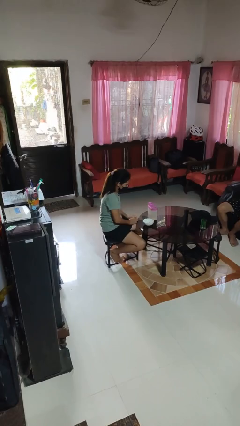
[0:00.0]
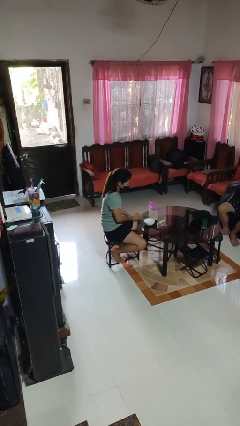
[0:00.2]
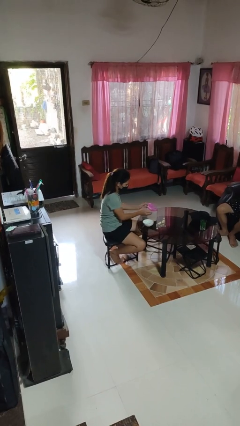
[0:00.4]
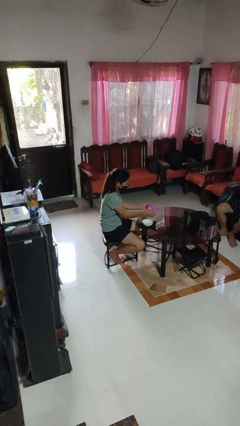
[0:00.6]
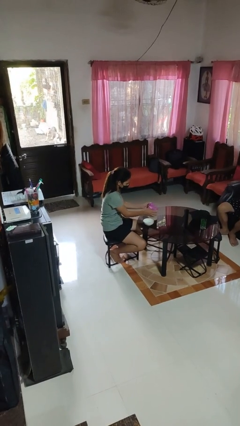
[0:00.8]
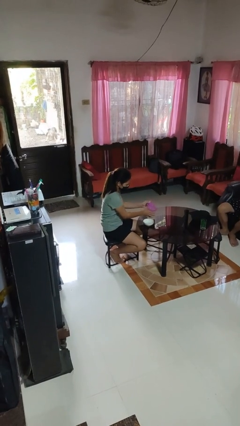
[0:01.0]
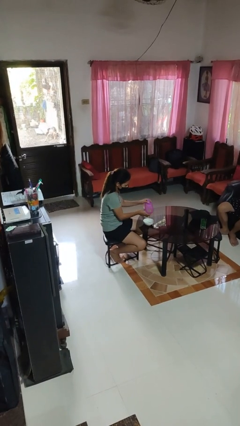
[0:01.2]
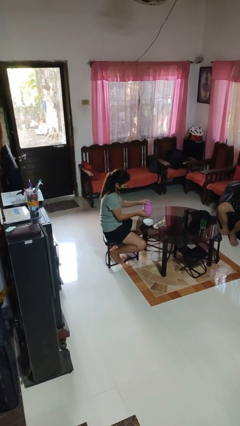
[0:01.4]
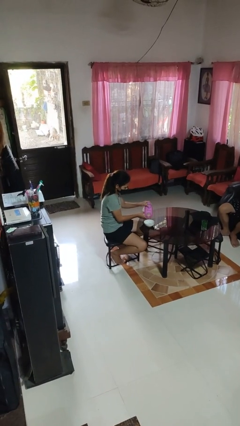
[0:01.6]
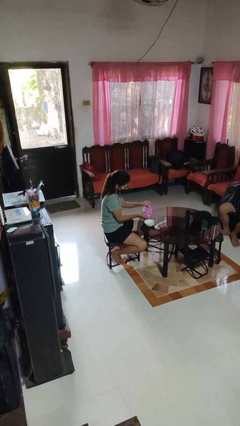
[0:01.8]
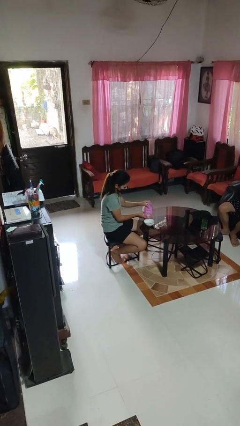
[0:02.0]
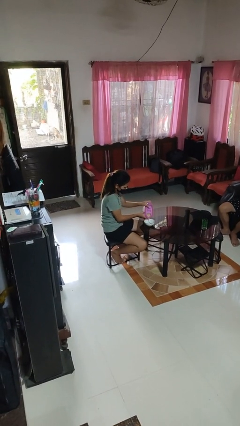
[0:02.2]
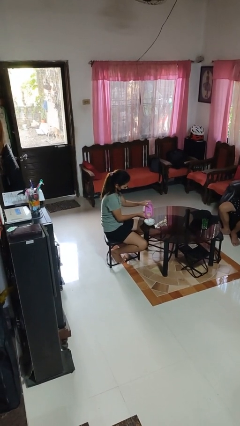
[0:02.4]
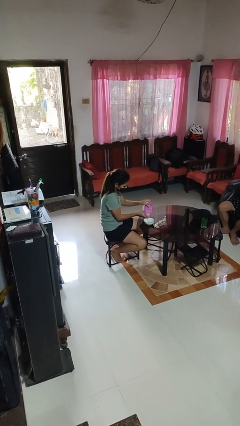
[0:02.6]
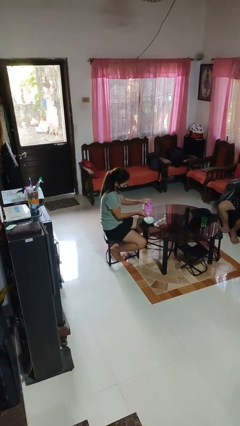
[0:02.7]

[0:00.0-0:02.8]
person pours into bowl

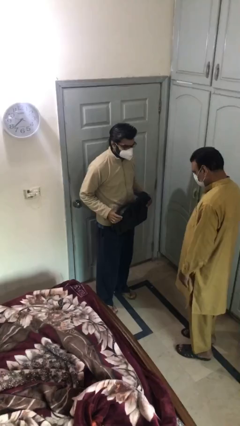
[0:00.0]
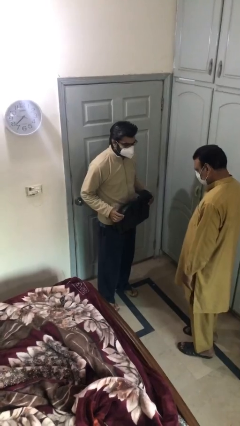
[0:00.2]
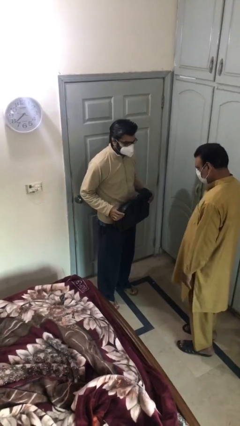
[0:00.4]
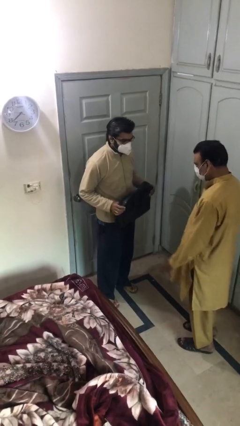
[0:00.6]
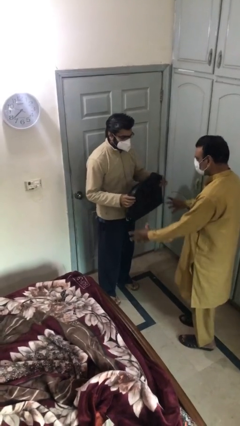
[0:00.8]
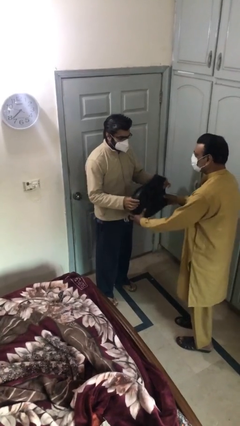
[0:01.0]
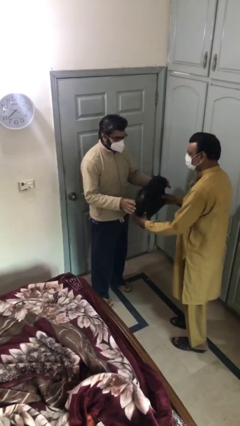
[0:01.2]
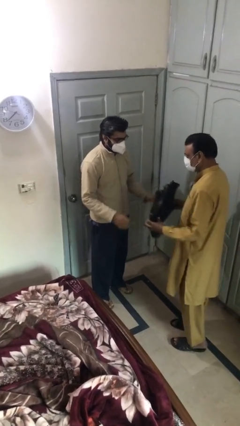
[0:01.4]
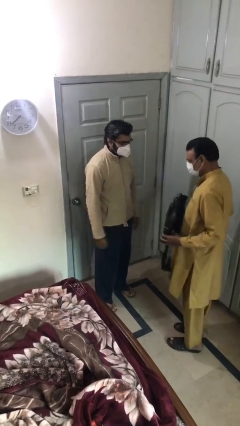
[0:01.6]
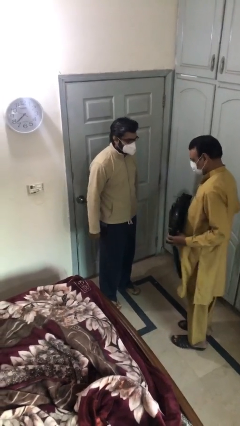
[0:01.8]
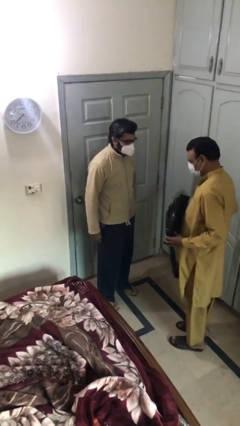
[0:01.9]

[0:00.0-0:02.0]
person transfers object to person

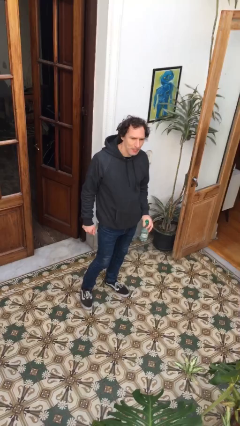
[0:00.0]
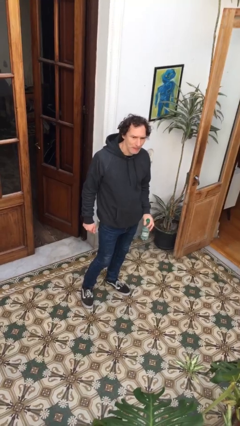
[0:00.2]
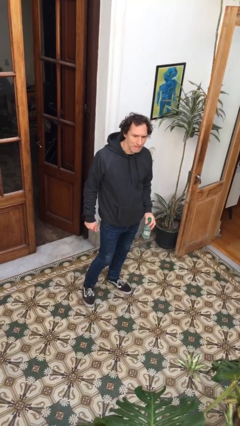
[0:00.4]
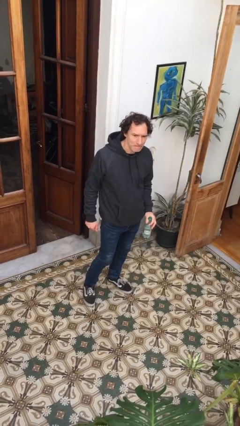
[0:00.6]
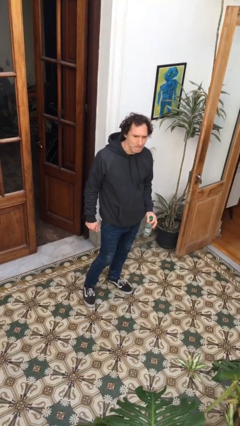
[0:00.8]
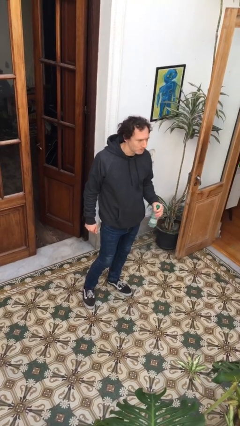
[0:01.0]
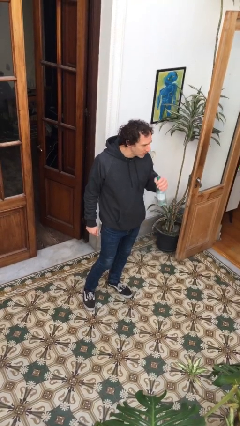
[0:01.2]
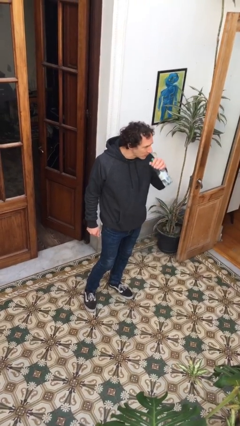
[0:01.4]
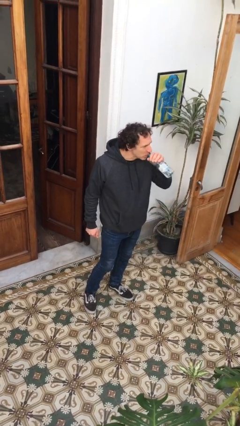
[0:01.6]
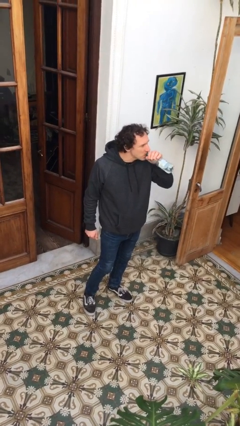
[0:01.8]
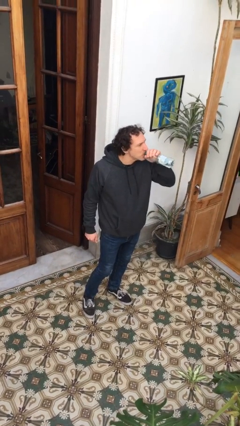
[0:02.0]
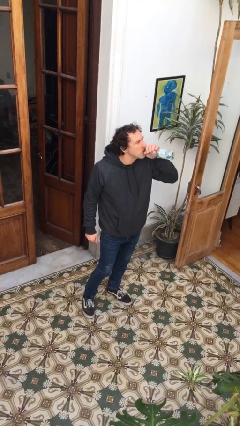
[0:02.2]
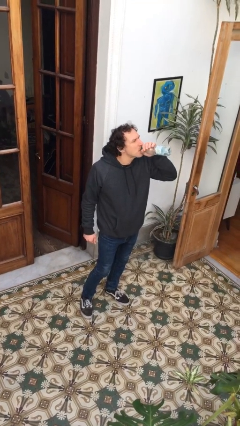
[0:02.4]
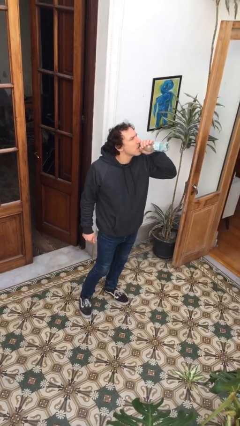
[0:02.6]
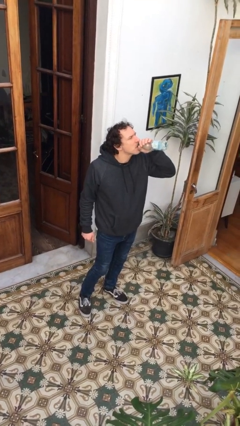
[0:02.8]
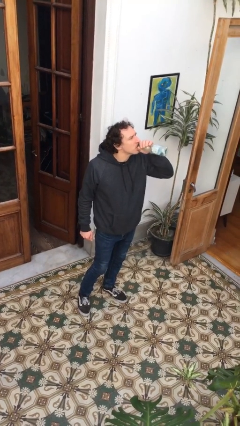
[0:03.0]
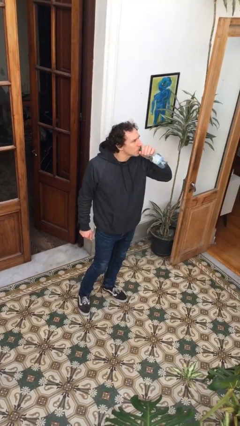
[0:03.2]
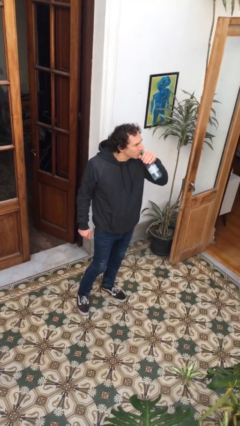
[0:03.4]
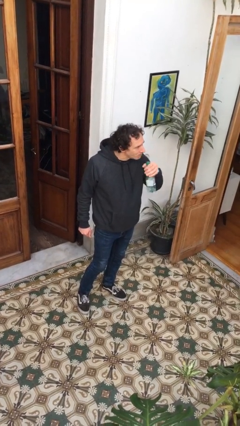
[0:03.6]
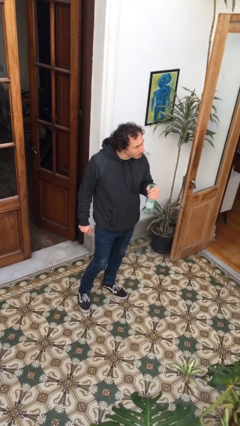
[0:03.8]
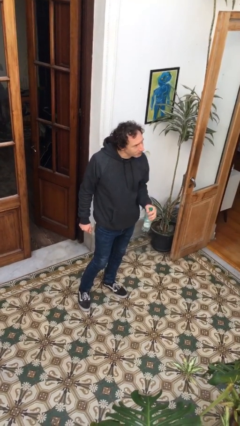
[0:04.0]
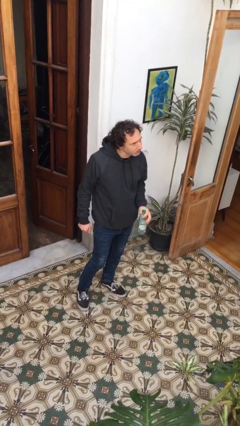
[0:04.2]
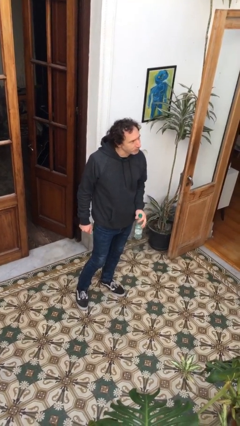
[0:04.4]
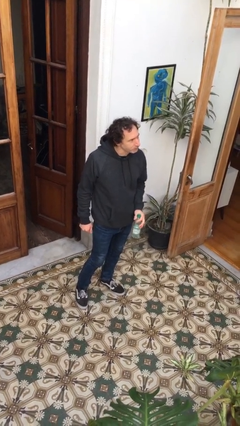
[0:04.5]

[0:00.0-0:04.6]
person drinks from bottle

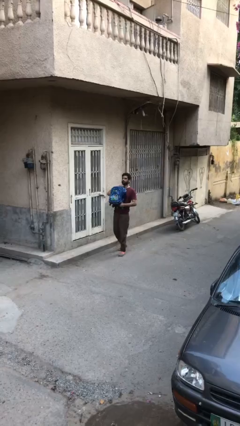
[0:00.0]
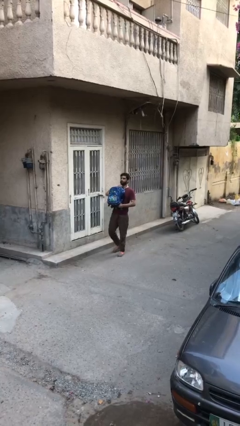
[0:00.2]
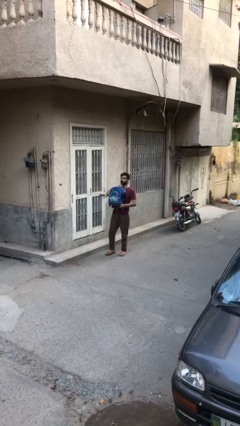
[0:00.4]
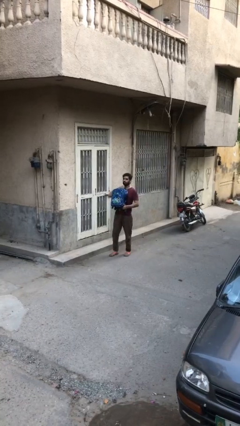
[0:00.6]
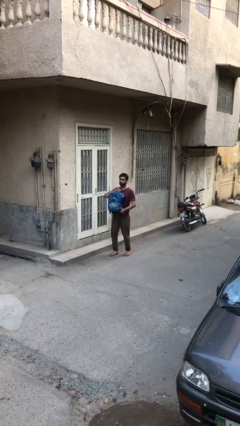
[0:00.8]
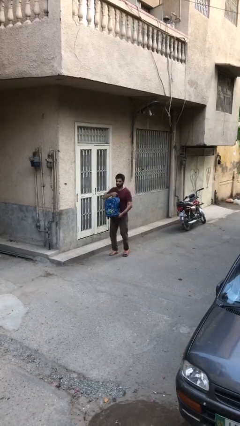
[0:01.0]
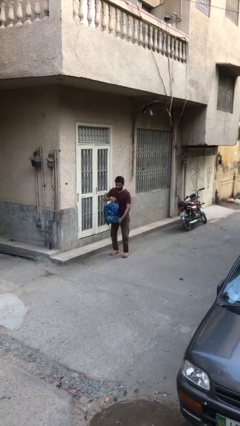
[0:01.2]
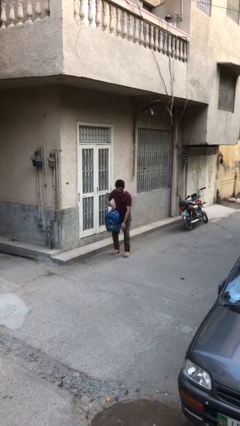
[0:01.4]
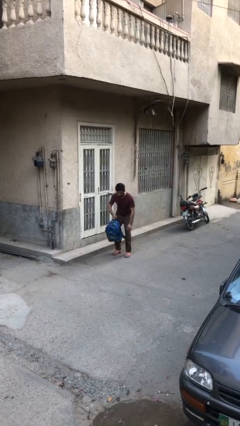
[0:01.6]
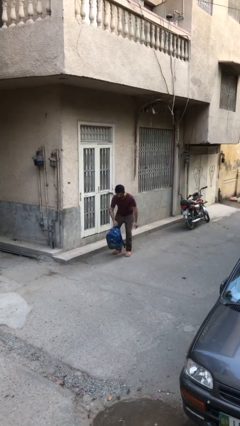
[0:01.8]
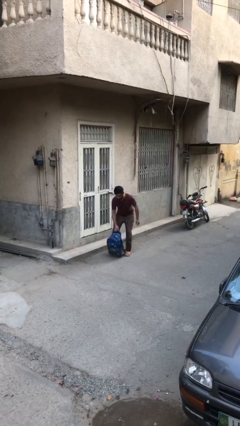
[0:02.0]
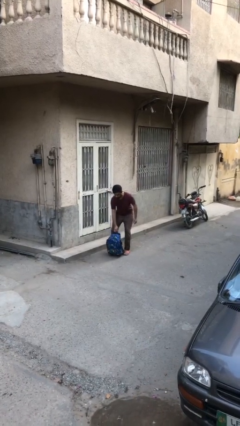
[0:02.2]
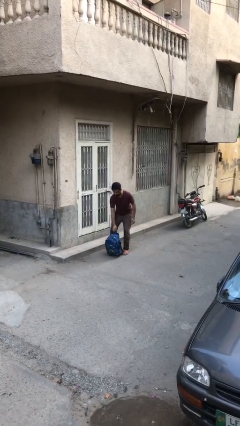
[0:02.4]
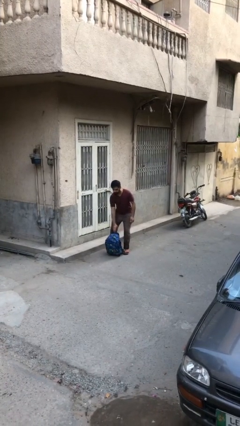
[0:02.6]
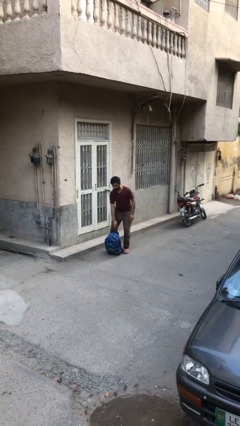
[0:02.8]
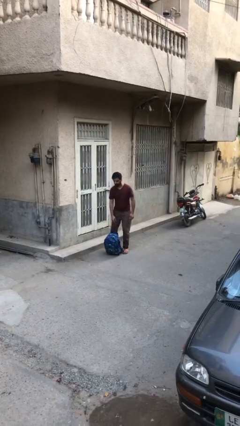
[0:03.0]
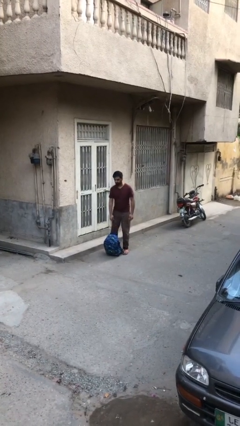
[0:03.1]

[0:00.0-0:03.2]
person puts down object on floor

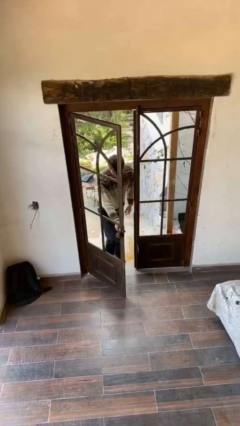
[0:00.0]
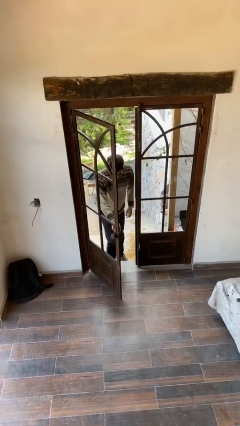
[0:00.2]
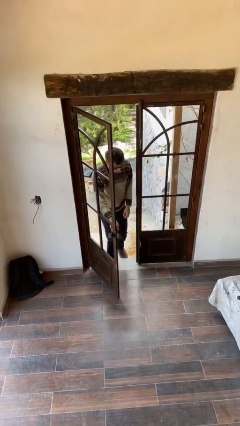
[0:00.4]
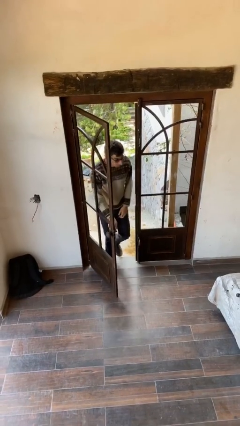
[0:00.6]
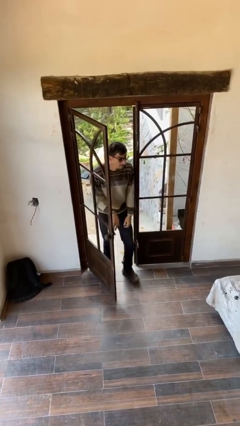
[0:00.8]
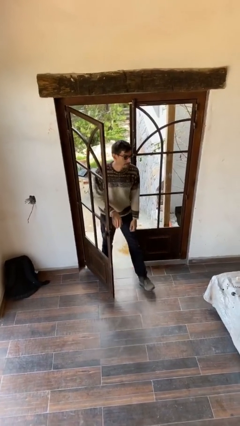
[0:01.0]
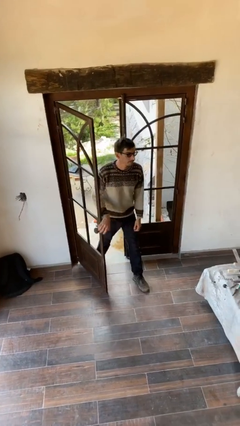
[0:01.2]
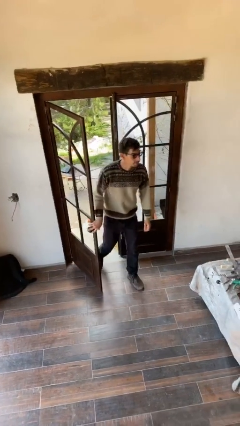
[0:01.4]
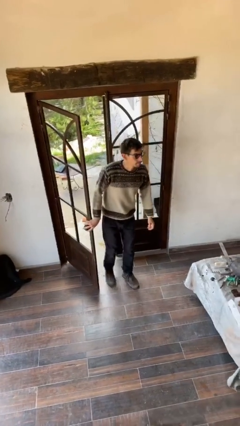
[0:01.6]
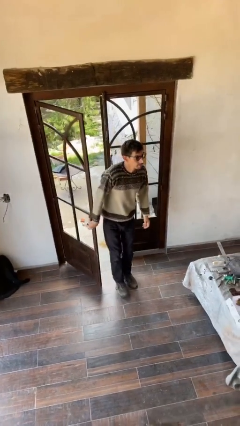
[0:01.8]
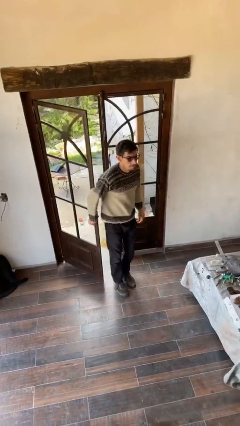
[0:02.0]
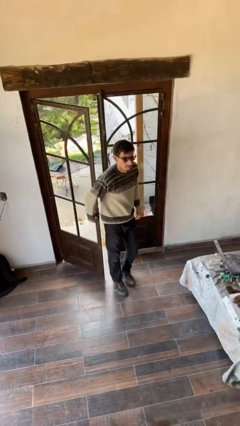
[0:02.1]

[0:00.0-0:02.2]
person enters scene through structure

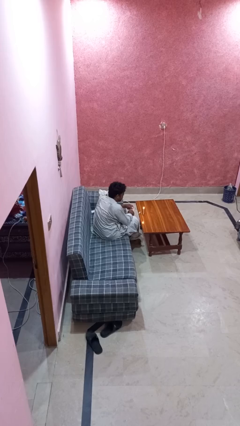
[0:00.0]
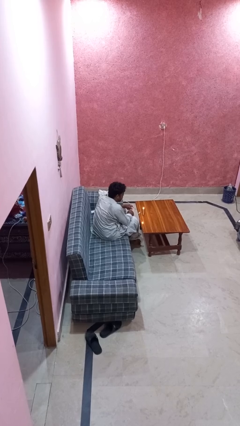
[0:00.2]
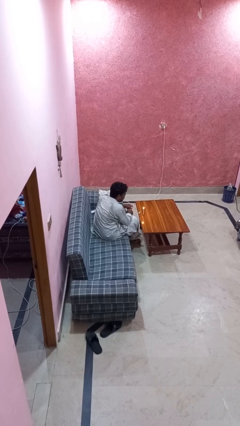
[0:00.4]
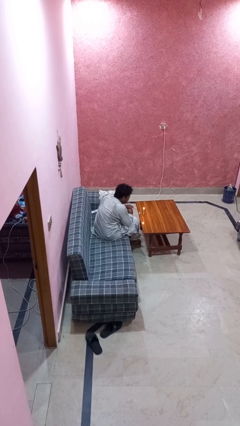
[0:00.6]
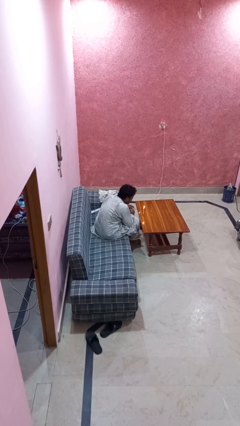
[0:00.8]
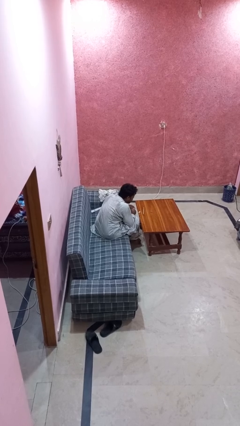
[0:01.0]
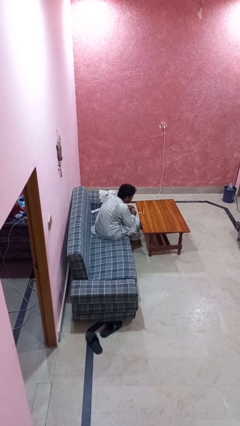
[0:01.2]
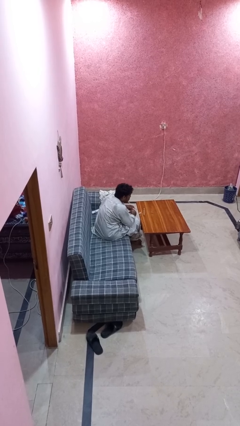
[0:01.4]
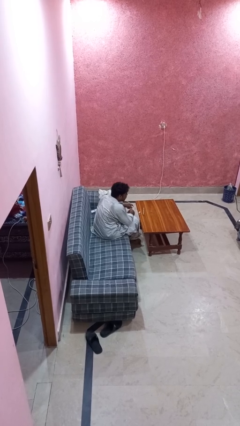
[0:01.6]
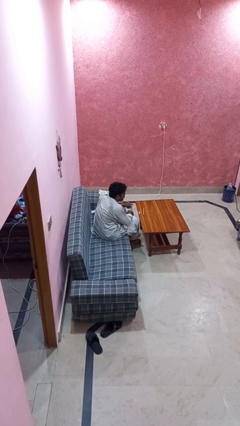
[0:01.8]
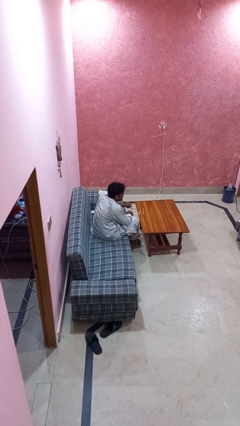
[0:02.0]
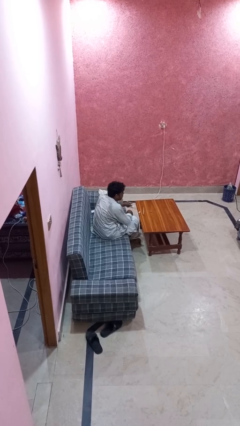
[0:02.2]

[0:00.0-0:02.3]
person extinguishes candle

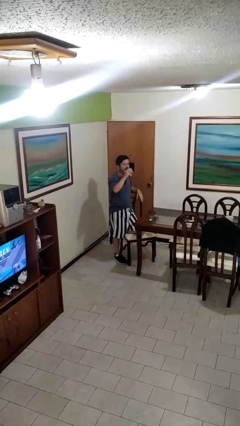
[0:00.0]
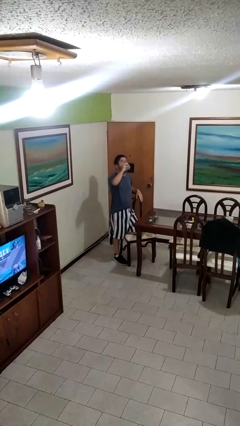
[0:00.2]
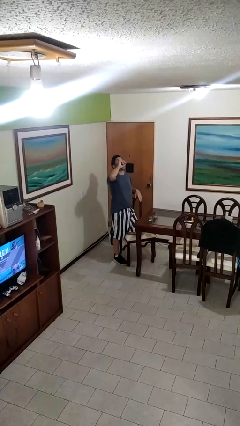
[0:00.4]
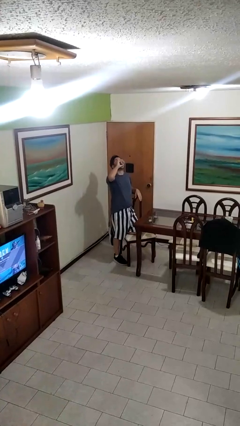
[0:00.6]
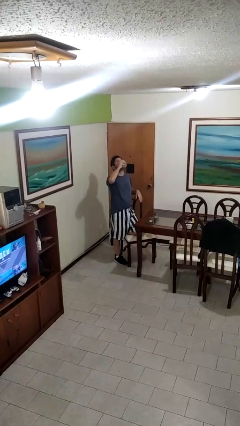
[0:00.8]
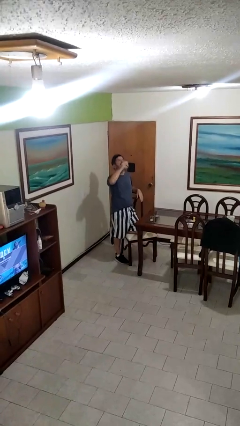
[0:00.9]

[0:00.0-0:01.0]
person drinks from shotglass
